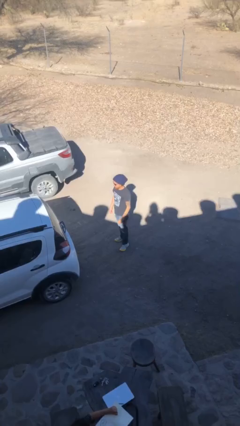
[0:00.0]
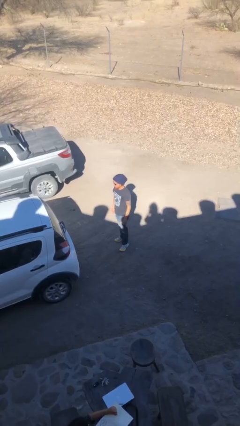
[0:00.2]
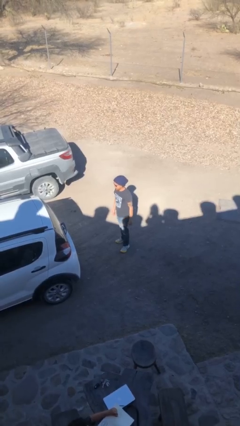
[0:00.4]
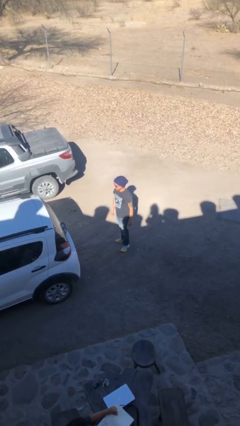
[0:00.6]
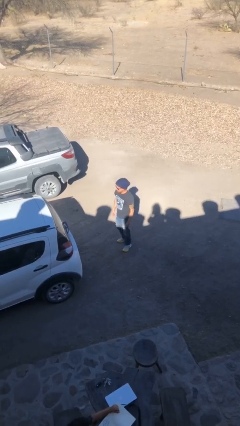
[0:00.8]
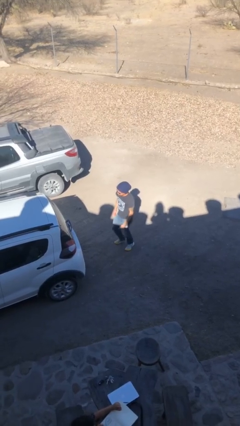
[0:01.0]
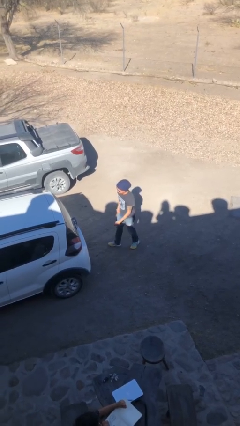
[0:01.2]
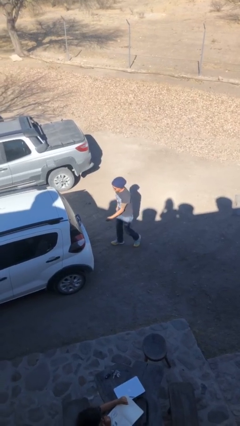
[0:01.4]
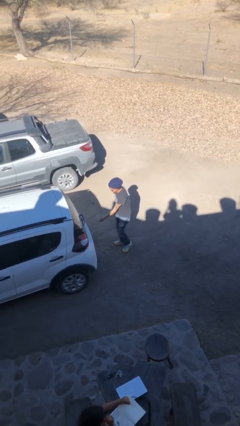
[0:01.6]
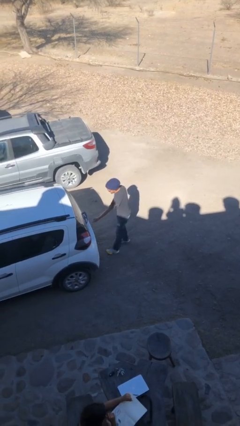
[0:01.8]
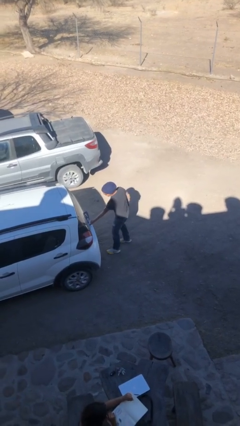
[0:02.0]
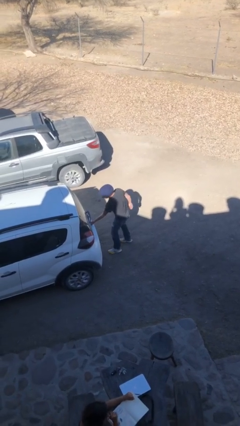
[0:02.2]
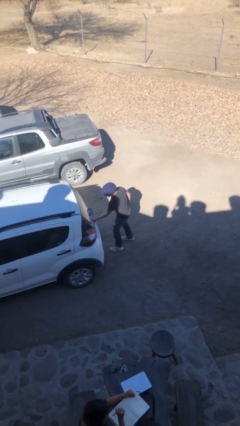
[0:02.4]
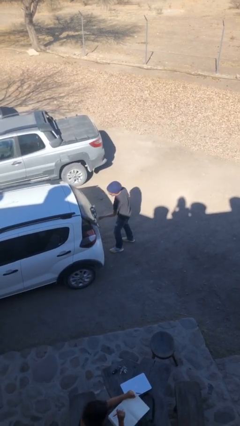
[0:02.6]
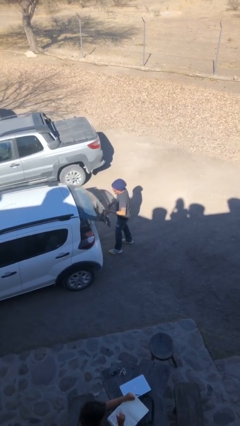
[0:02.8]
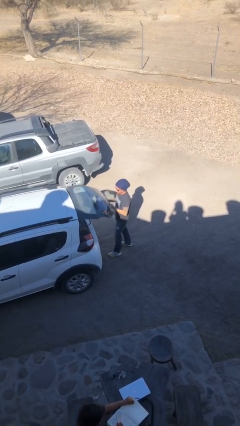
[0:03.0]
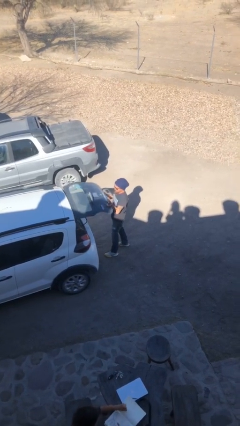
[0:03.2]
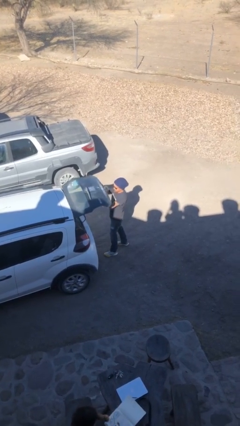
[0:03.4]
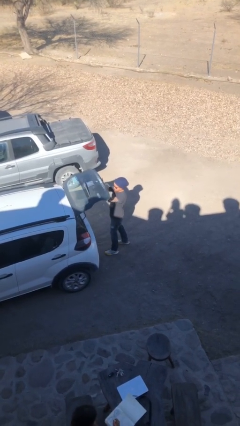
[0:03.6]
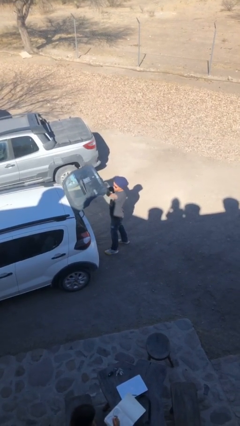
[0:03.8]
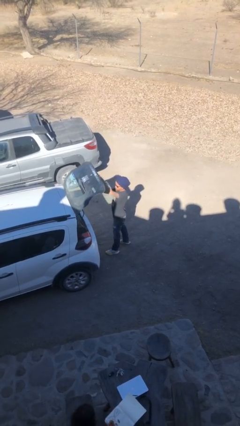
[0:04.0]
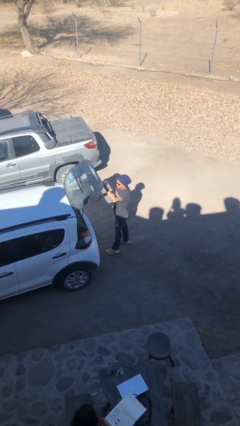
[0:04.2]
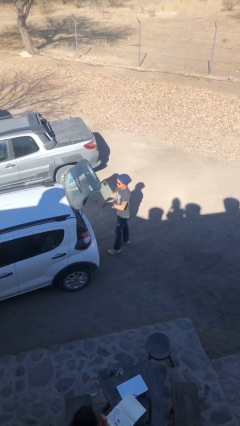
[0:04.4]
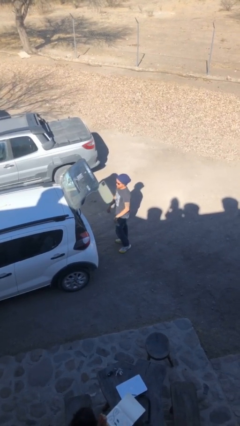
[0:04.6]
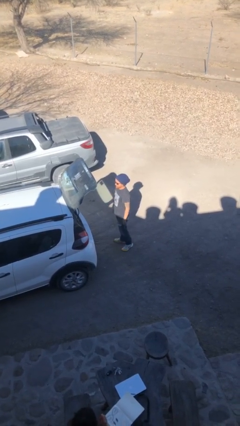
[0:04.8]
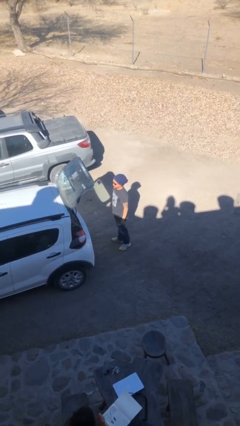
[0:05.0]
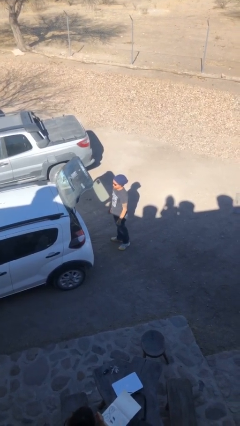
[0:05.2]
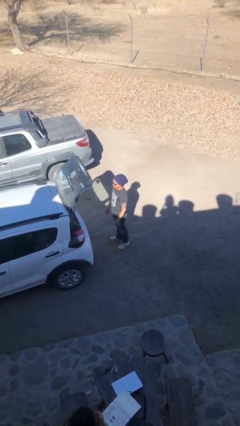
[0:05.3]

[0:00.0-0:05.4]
person opens car trunk

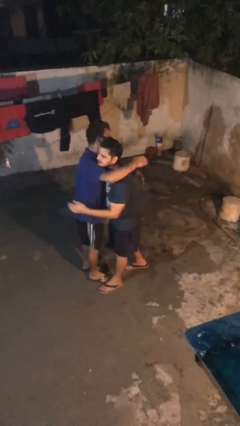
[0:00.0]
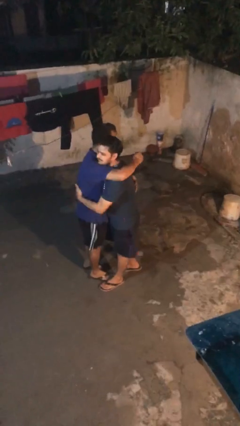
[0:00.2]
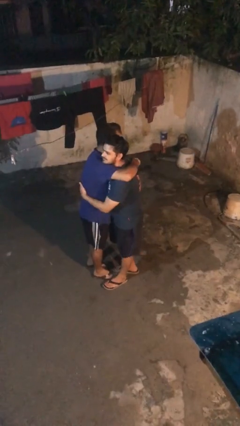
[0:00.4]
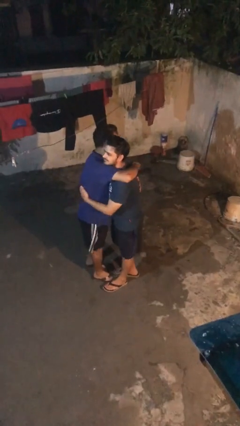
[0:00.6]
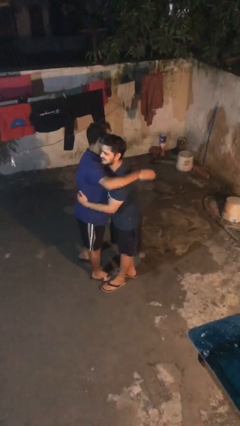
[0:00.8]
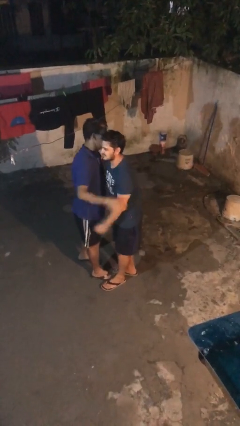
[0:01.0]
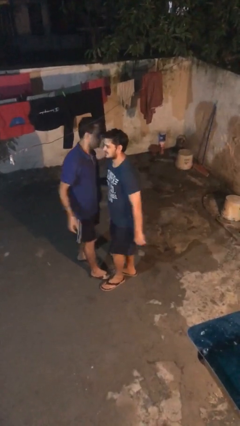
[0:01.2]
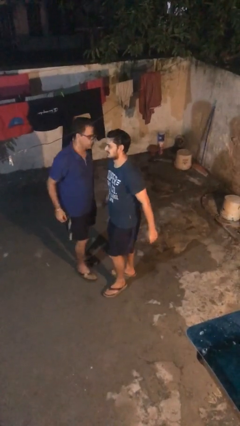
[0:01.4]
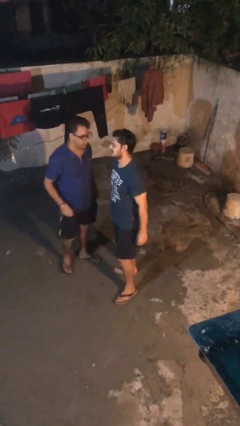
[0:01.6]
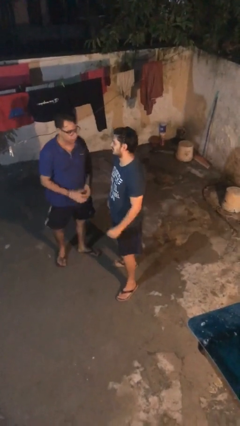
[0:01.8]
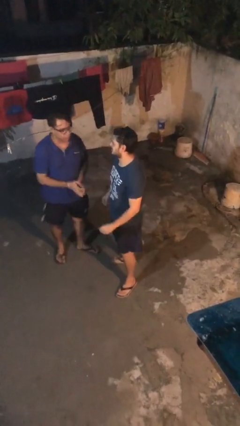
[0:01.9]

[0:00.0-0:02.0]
person embraces person

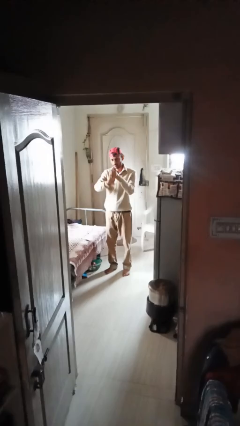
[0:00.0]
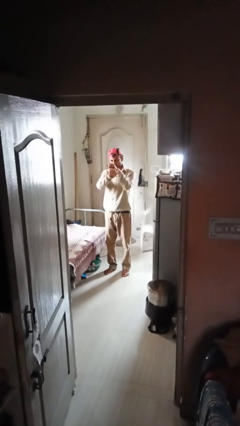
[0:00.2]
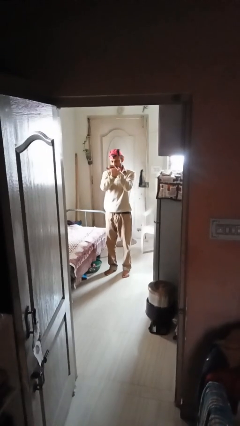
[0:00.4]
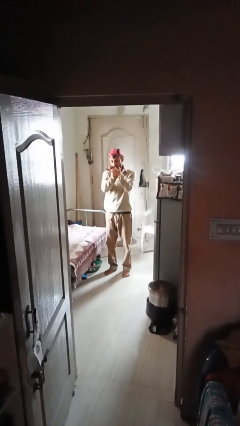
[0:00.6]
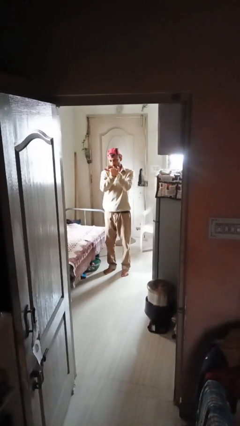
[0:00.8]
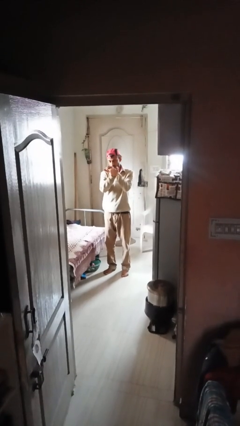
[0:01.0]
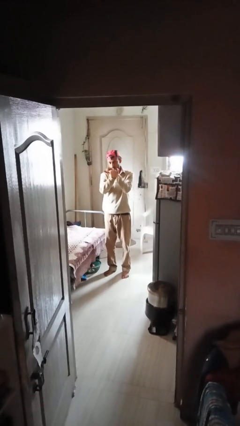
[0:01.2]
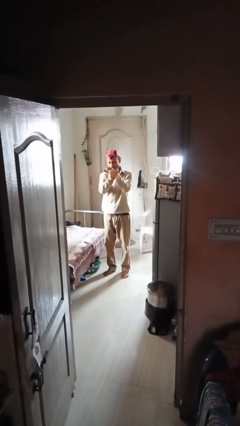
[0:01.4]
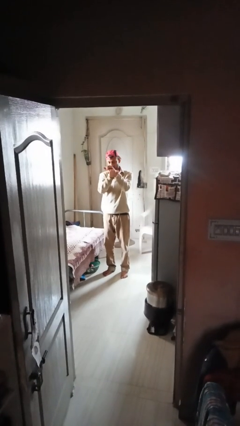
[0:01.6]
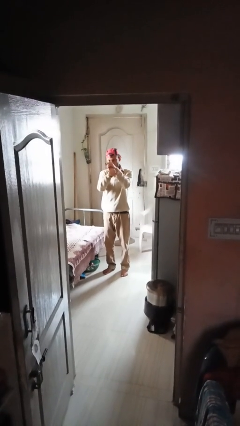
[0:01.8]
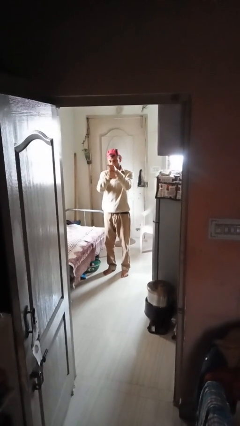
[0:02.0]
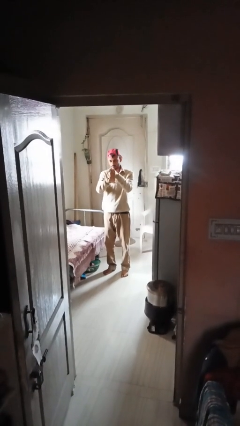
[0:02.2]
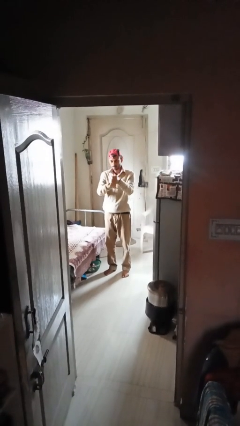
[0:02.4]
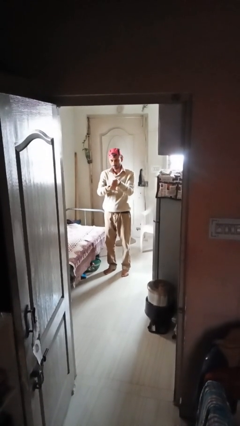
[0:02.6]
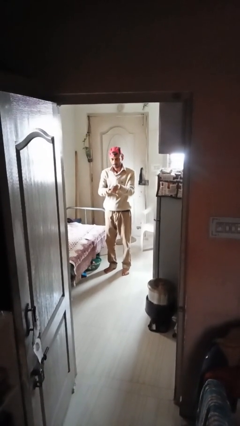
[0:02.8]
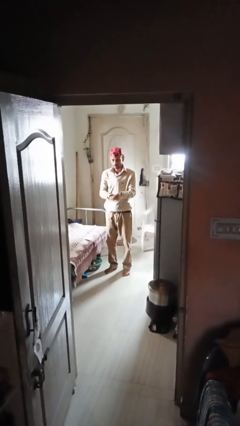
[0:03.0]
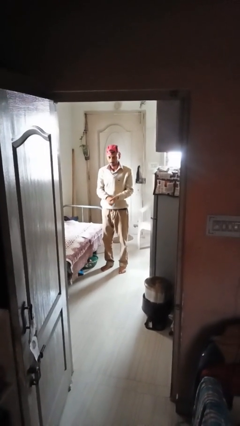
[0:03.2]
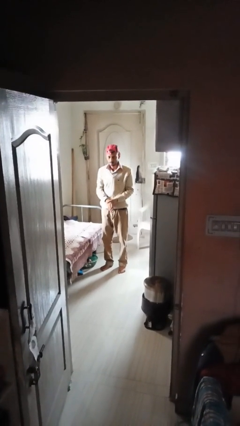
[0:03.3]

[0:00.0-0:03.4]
person cracks knuckles

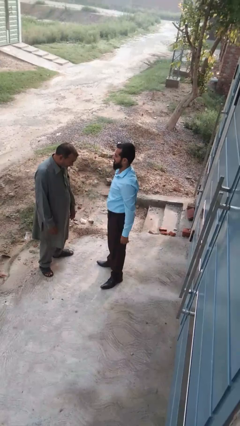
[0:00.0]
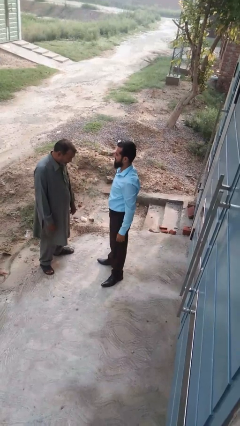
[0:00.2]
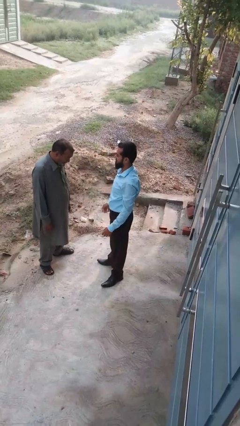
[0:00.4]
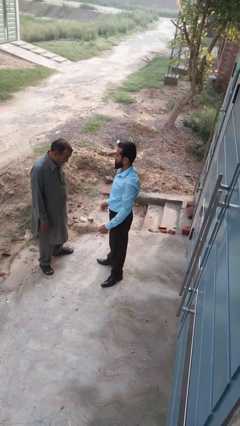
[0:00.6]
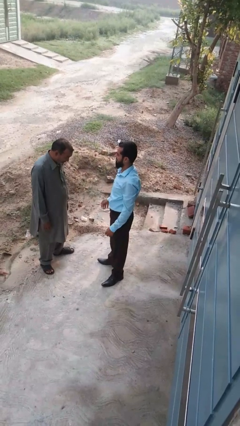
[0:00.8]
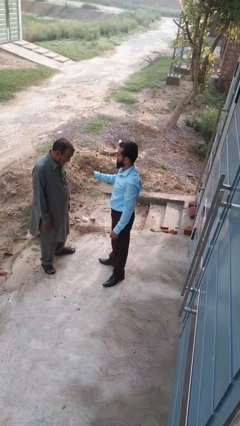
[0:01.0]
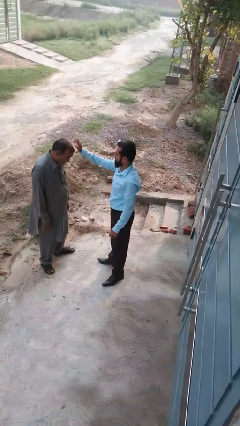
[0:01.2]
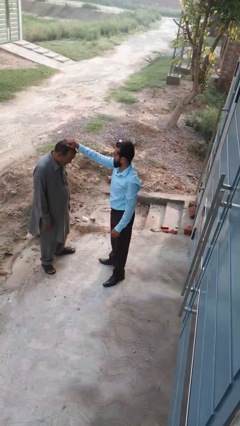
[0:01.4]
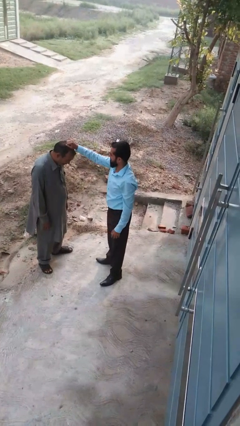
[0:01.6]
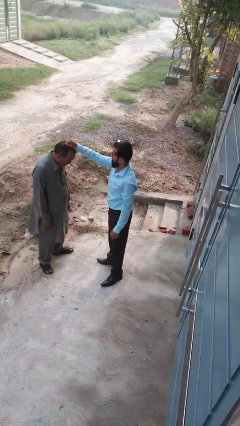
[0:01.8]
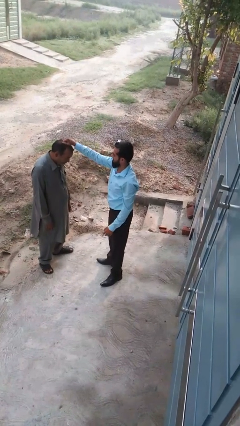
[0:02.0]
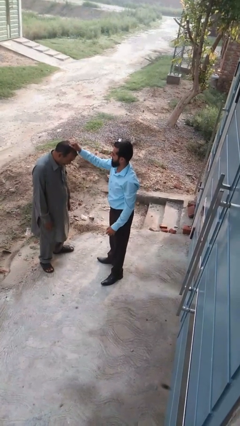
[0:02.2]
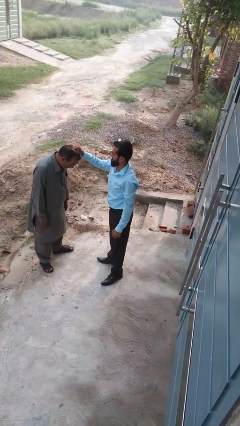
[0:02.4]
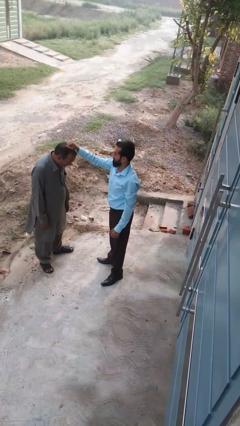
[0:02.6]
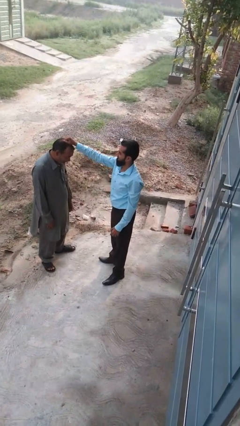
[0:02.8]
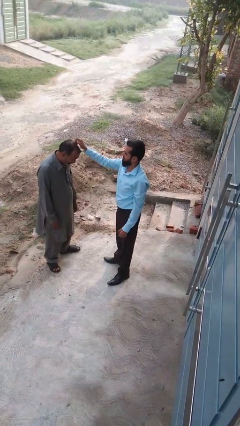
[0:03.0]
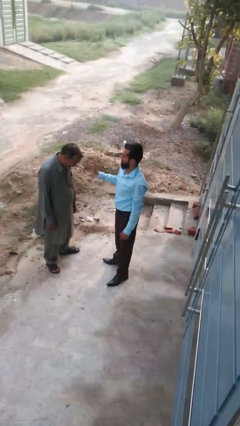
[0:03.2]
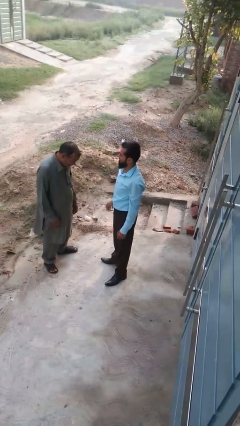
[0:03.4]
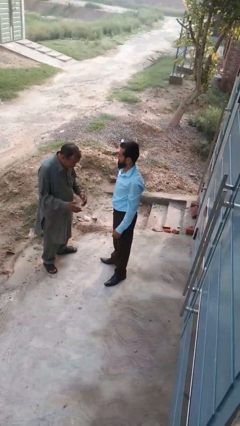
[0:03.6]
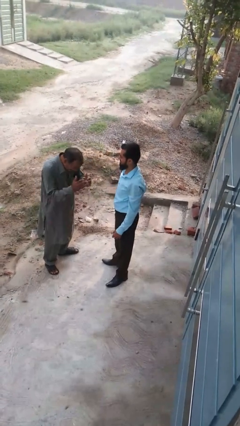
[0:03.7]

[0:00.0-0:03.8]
person grabs person by hair

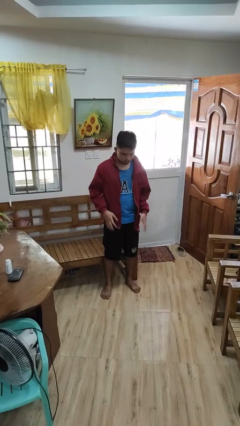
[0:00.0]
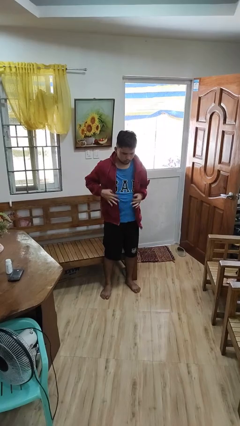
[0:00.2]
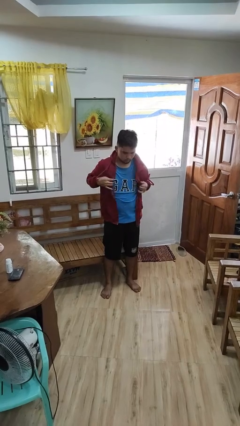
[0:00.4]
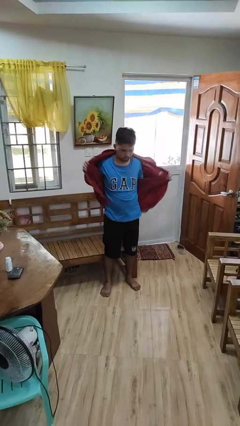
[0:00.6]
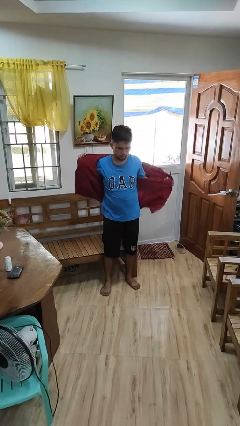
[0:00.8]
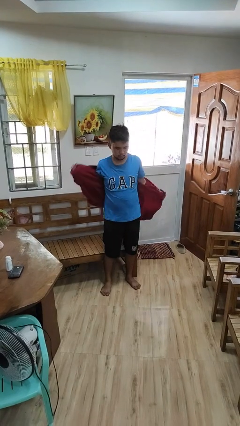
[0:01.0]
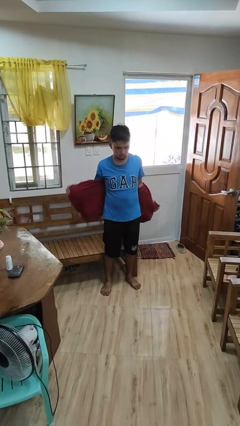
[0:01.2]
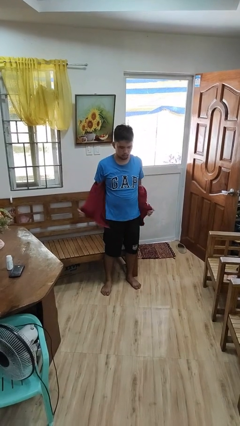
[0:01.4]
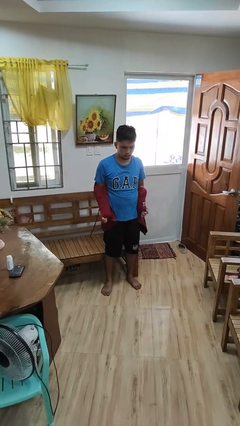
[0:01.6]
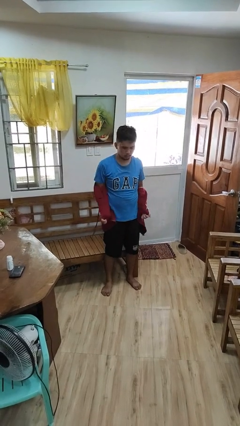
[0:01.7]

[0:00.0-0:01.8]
person takes off jacket

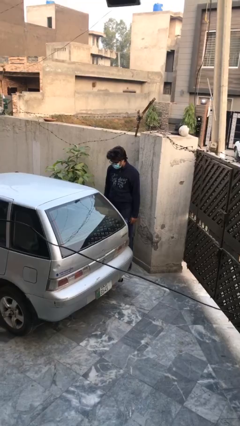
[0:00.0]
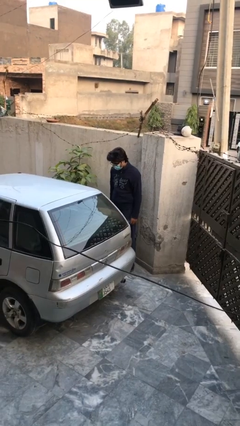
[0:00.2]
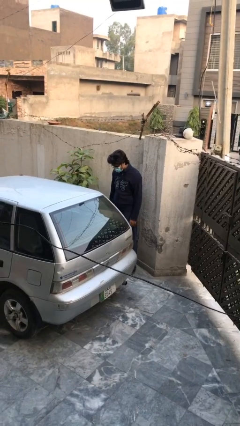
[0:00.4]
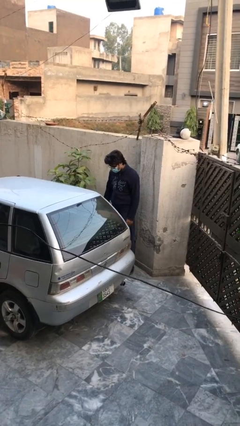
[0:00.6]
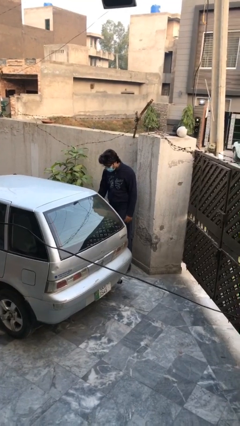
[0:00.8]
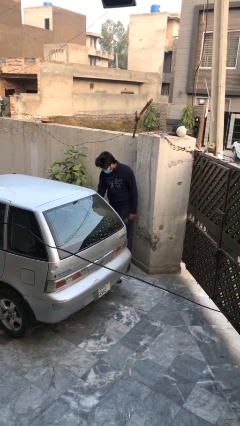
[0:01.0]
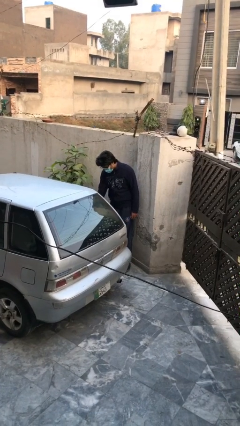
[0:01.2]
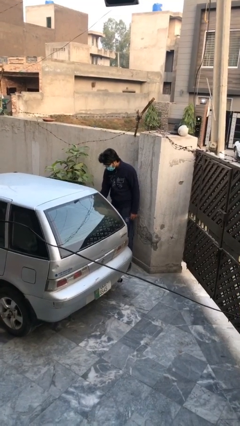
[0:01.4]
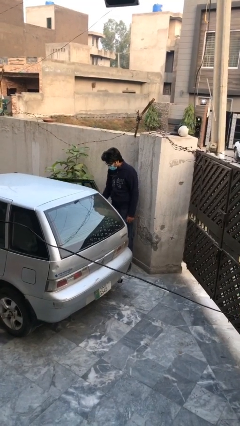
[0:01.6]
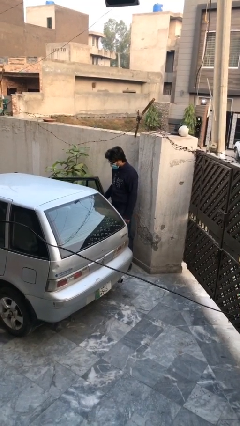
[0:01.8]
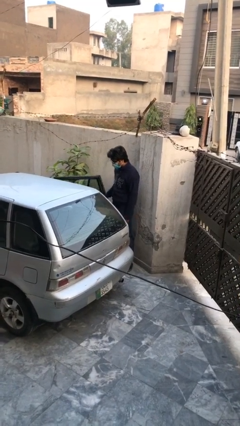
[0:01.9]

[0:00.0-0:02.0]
person opens car door
